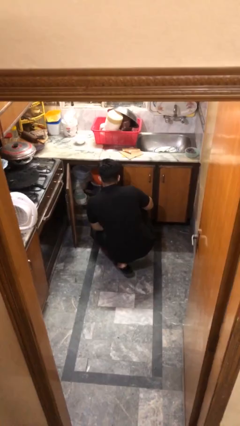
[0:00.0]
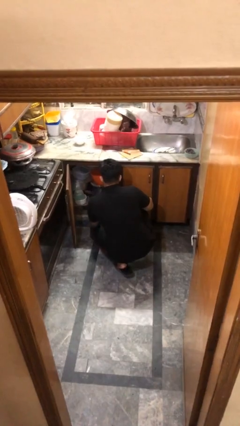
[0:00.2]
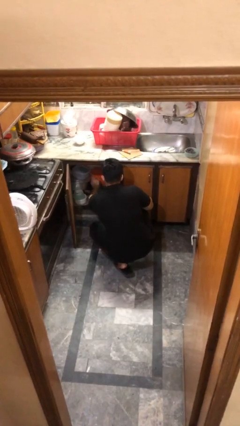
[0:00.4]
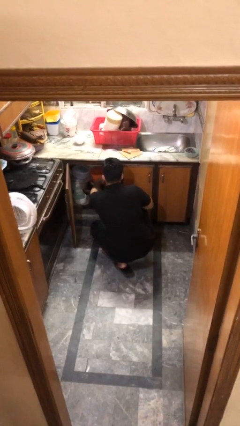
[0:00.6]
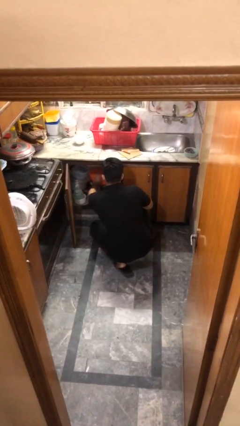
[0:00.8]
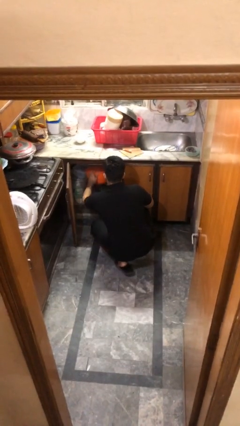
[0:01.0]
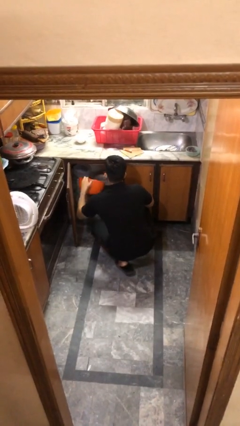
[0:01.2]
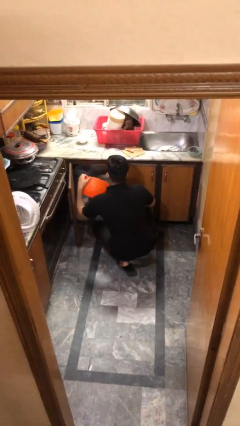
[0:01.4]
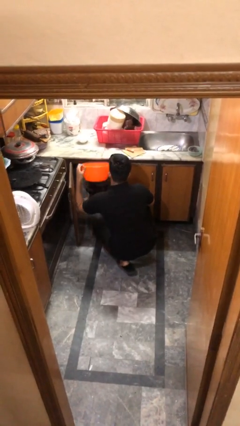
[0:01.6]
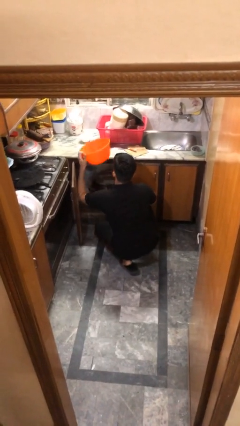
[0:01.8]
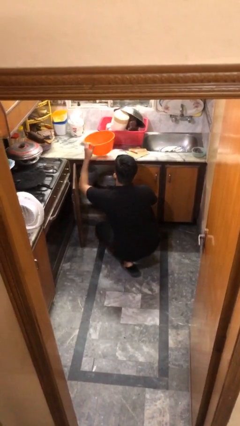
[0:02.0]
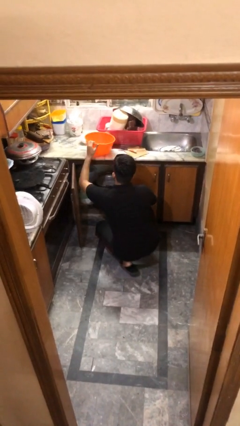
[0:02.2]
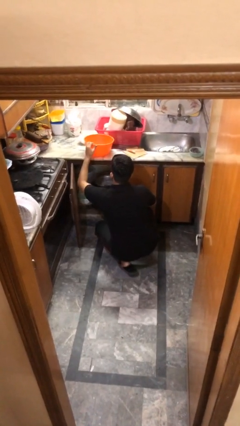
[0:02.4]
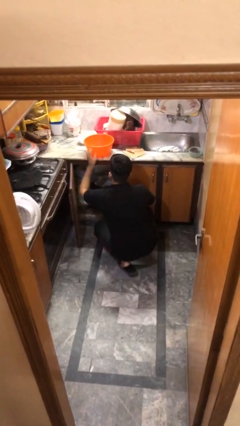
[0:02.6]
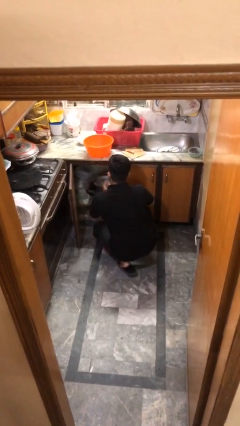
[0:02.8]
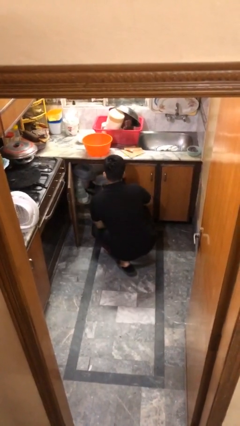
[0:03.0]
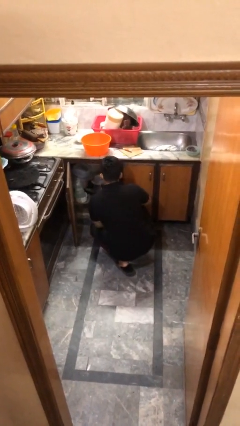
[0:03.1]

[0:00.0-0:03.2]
person takes object from kitchen drawer

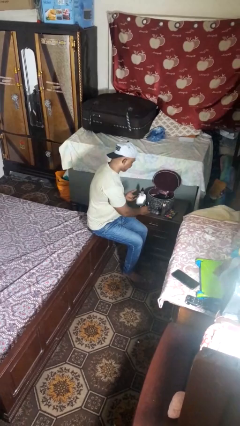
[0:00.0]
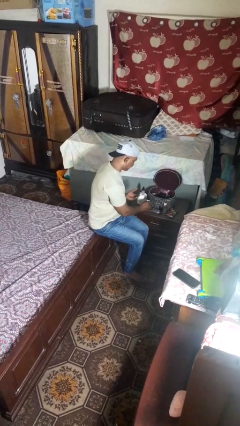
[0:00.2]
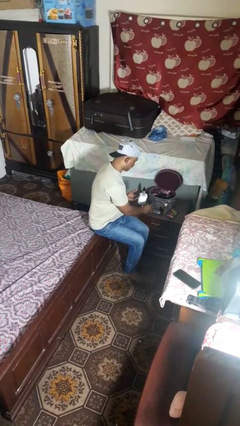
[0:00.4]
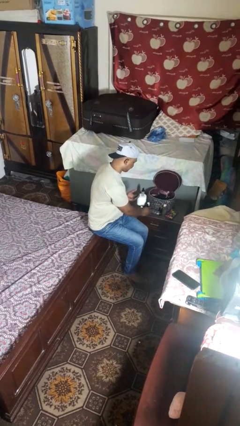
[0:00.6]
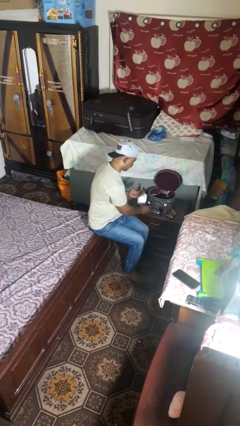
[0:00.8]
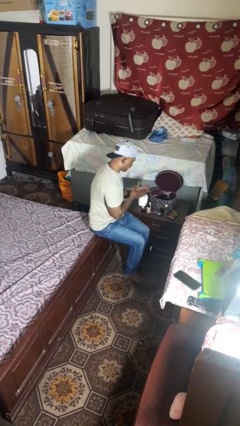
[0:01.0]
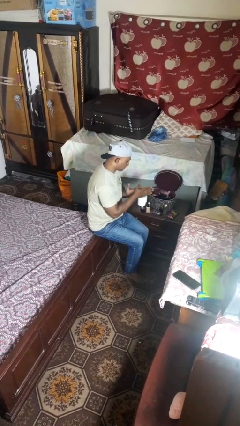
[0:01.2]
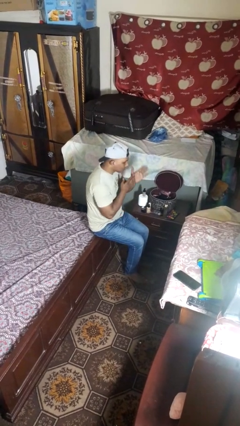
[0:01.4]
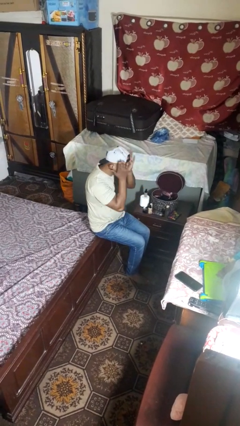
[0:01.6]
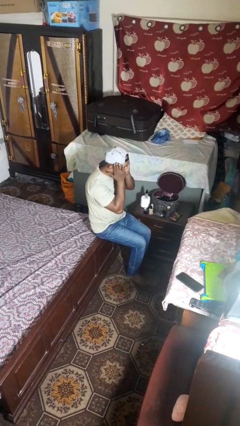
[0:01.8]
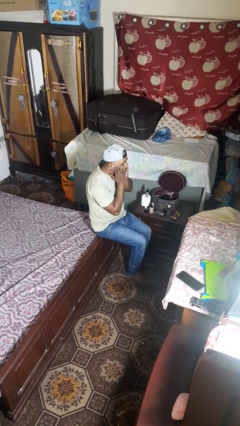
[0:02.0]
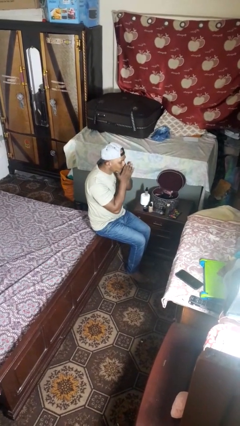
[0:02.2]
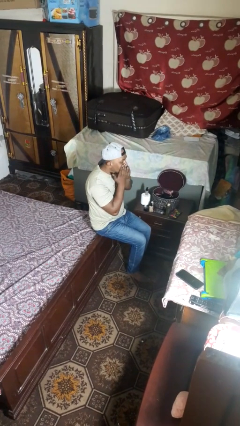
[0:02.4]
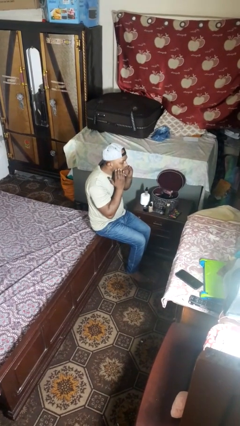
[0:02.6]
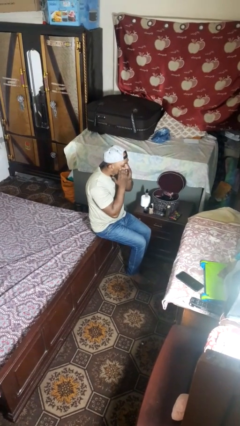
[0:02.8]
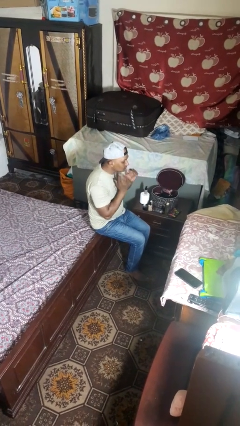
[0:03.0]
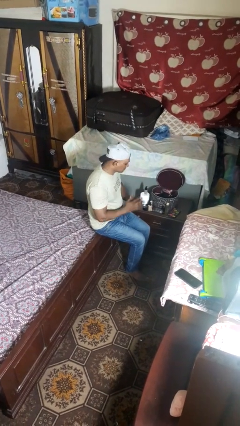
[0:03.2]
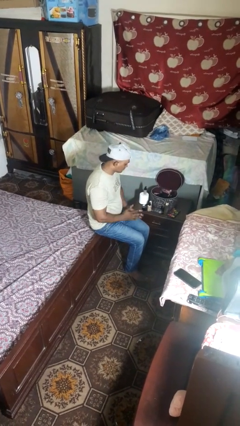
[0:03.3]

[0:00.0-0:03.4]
person applies foundation makeup

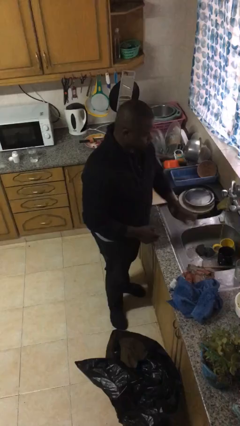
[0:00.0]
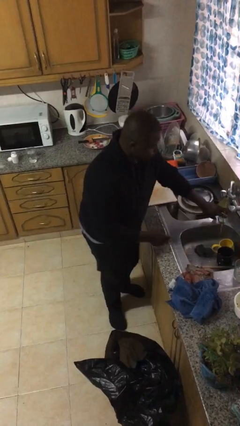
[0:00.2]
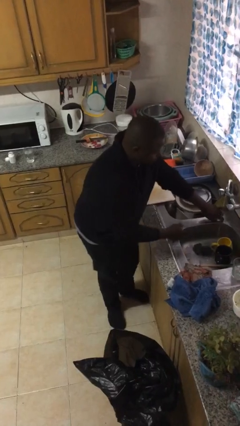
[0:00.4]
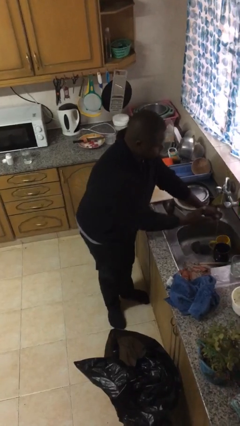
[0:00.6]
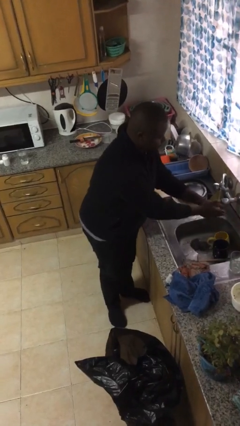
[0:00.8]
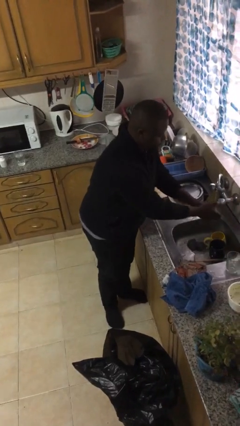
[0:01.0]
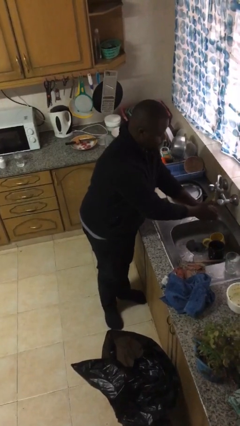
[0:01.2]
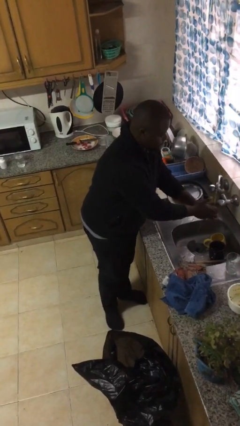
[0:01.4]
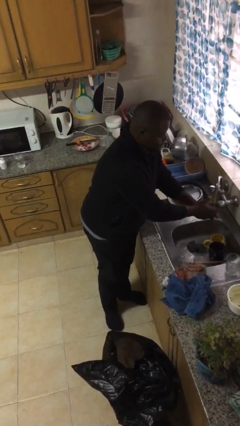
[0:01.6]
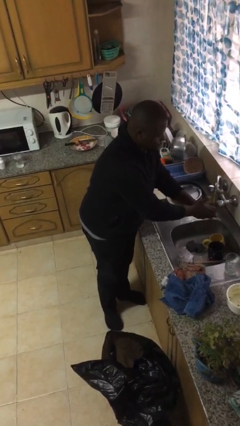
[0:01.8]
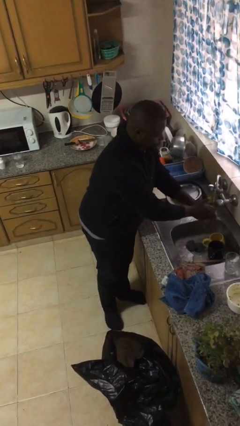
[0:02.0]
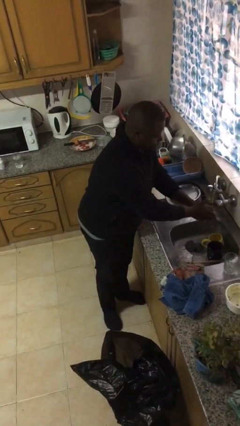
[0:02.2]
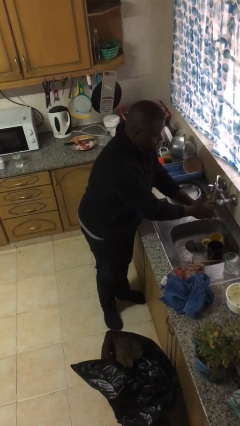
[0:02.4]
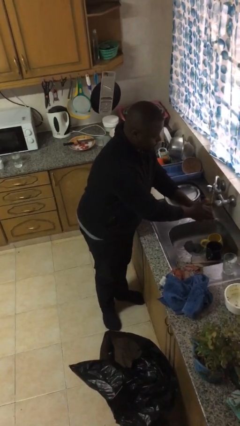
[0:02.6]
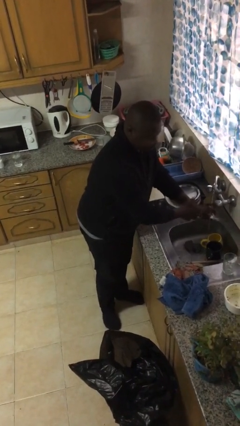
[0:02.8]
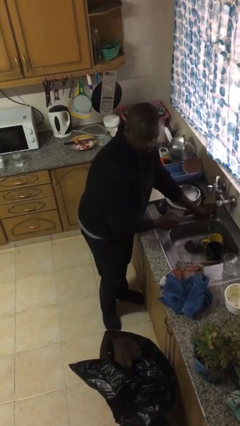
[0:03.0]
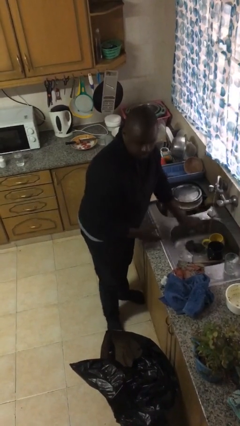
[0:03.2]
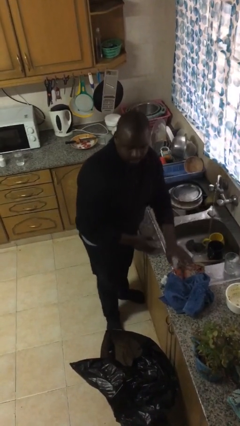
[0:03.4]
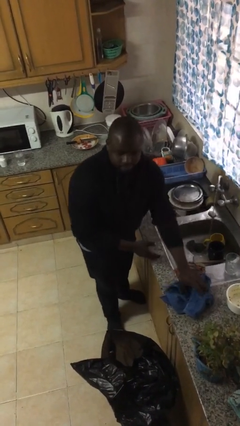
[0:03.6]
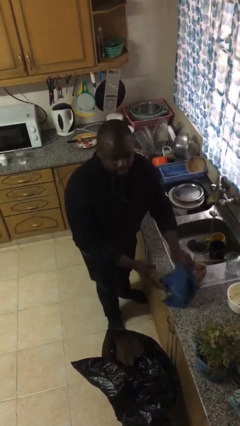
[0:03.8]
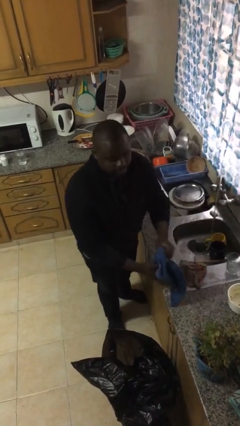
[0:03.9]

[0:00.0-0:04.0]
person washes hands

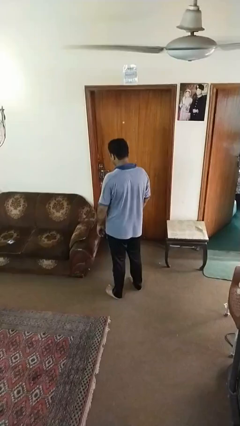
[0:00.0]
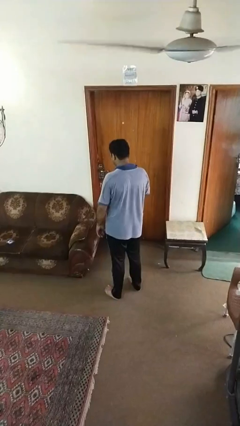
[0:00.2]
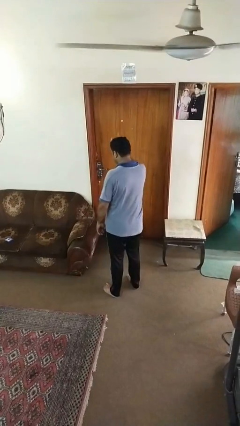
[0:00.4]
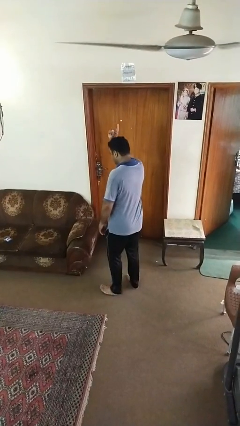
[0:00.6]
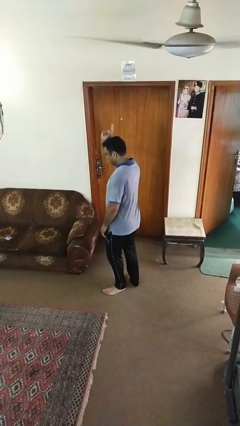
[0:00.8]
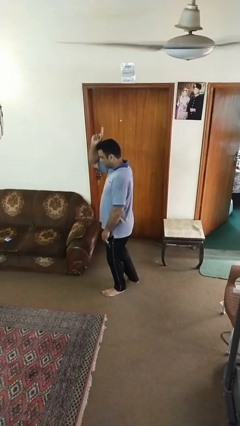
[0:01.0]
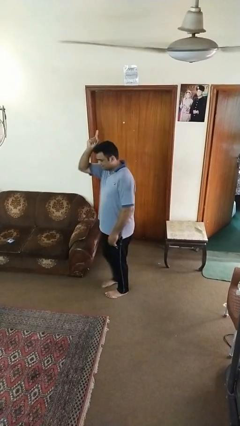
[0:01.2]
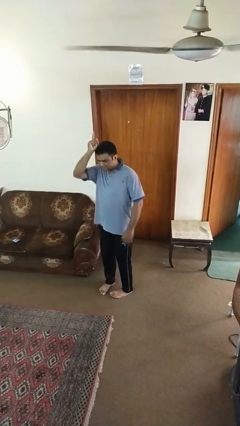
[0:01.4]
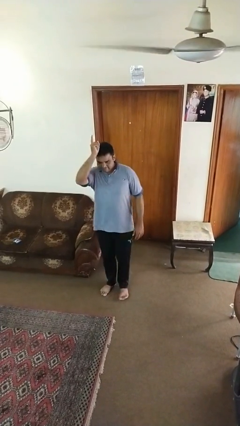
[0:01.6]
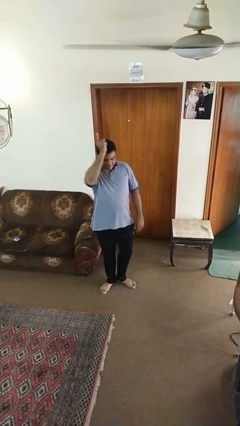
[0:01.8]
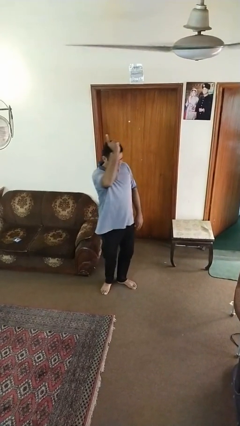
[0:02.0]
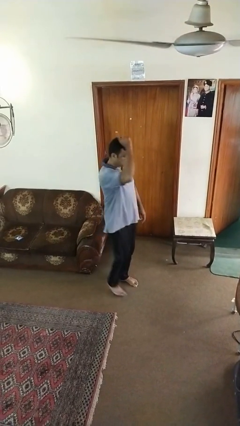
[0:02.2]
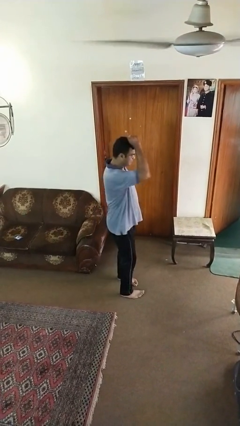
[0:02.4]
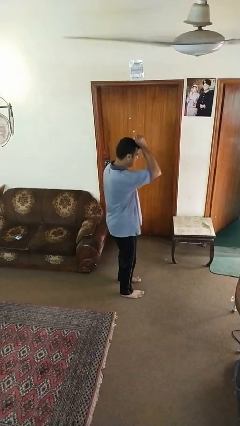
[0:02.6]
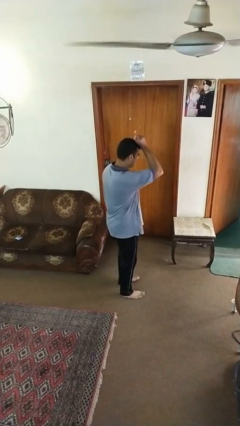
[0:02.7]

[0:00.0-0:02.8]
person twirls

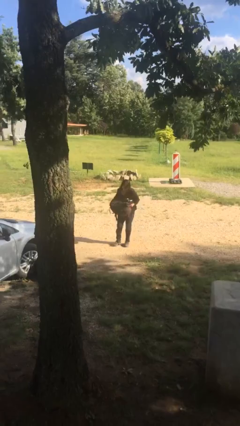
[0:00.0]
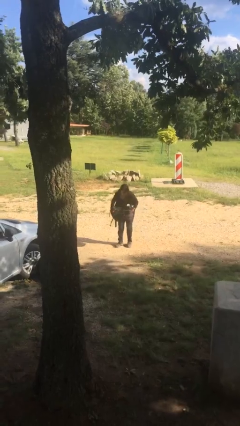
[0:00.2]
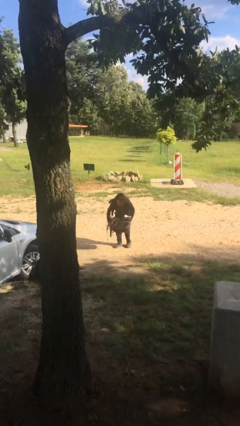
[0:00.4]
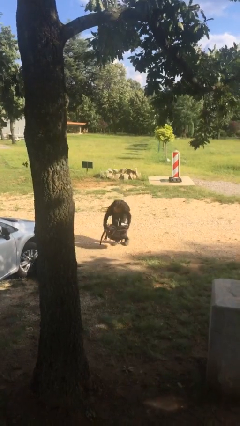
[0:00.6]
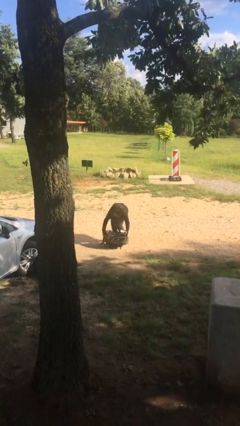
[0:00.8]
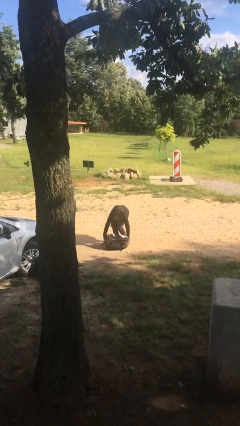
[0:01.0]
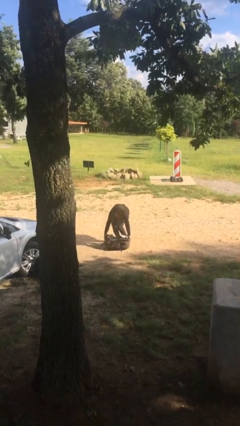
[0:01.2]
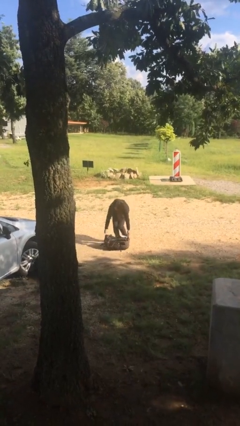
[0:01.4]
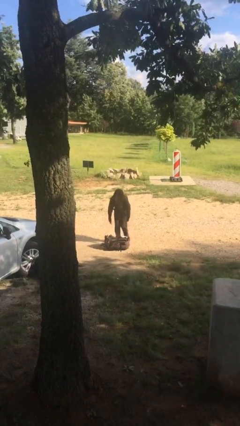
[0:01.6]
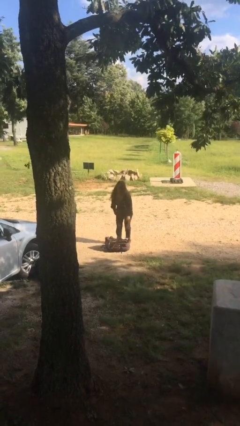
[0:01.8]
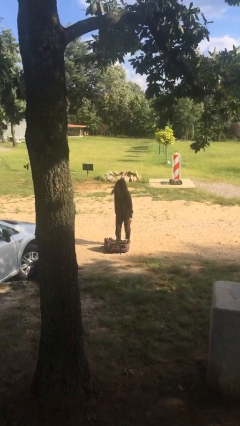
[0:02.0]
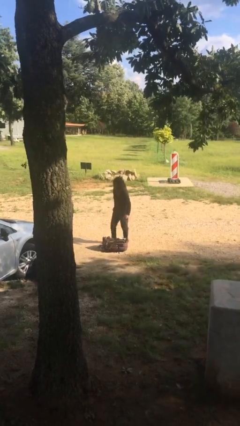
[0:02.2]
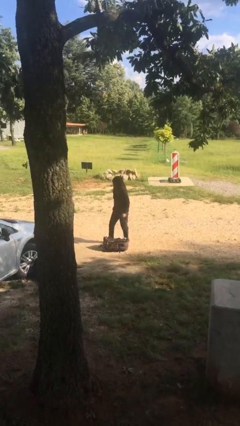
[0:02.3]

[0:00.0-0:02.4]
person puts down object on floor

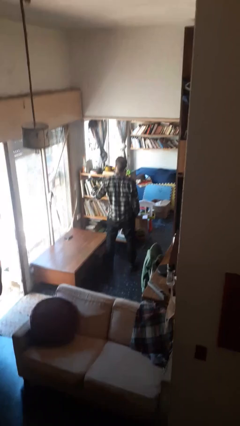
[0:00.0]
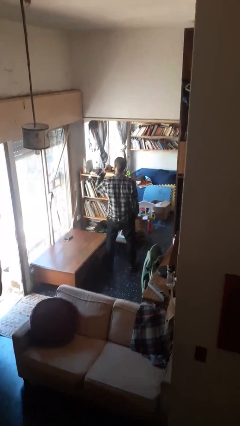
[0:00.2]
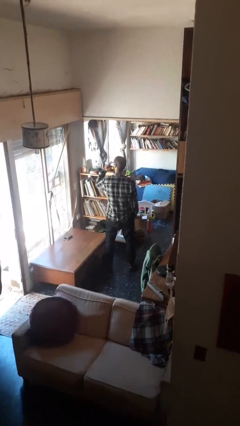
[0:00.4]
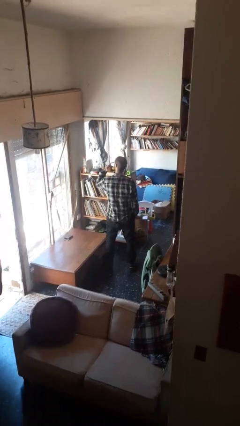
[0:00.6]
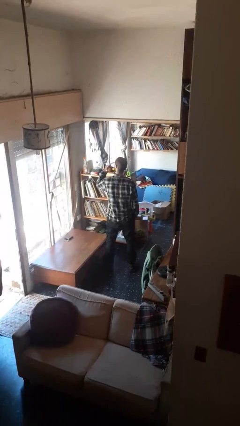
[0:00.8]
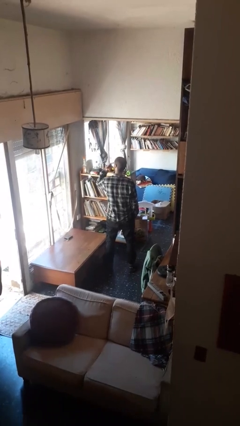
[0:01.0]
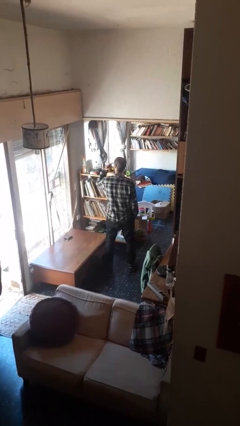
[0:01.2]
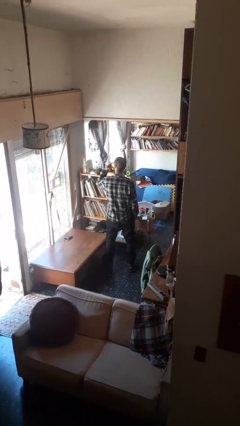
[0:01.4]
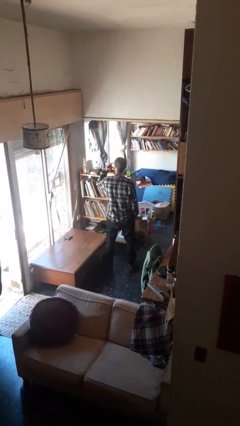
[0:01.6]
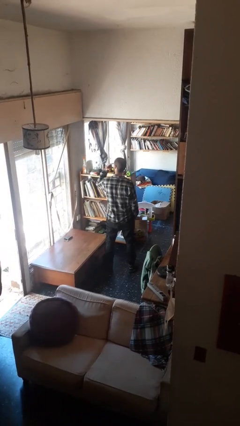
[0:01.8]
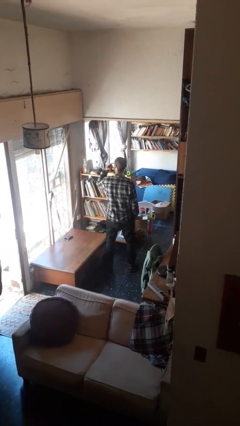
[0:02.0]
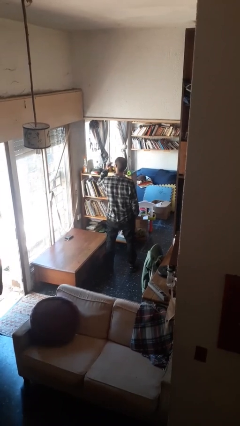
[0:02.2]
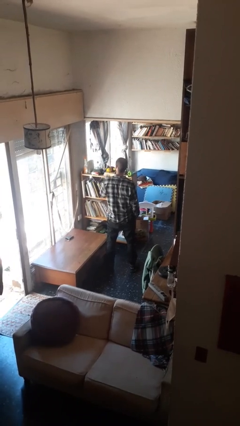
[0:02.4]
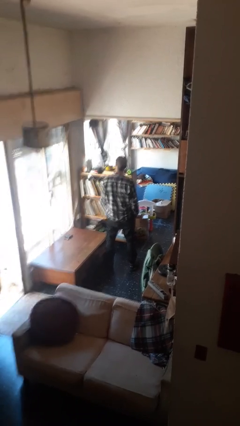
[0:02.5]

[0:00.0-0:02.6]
person gestures watch closely
